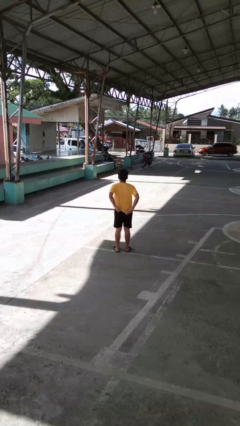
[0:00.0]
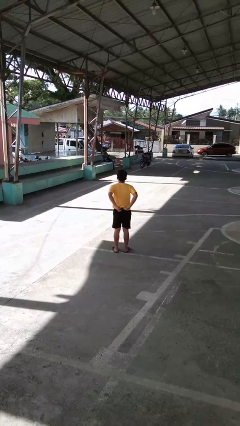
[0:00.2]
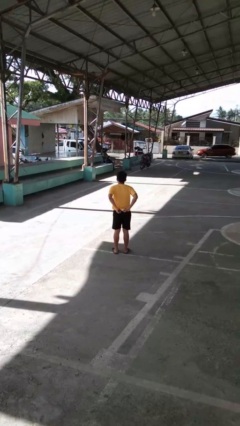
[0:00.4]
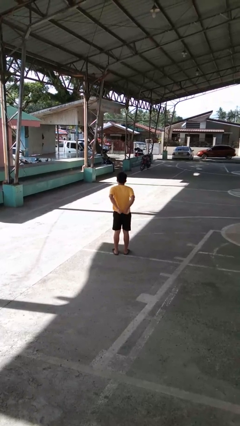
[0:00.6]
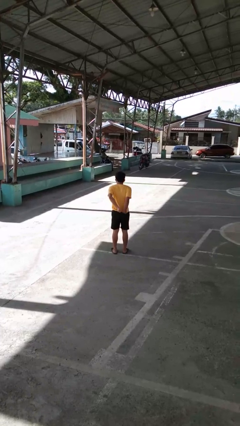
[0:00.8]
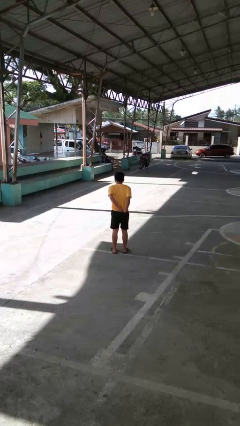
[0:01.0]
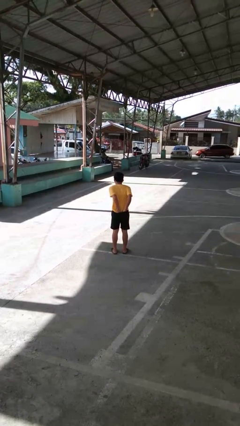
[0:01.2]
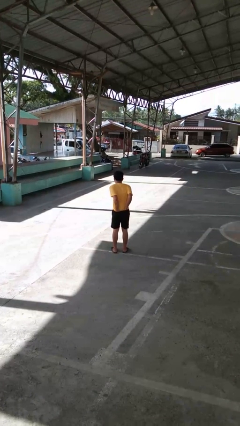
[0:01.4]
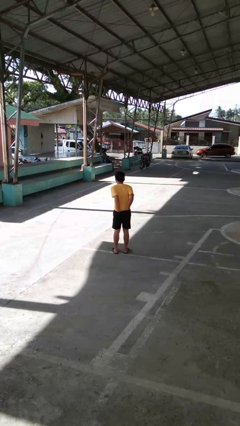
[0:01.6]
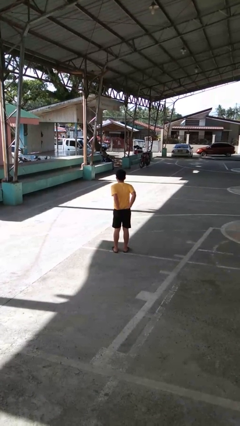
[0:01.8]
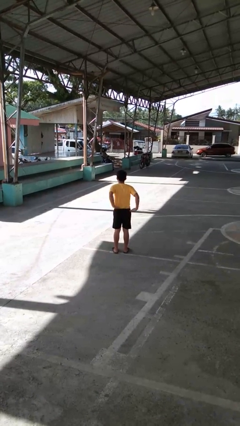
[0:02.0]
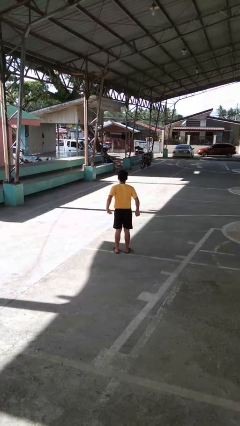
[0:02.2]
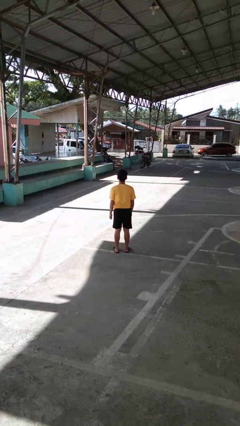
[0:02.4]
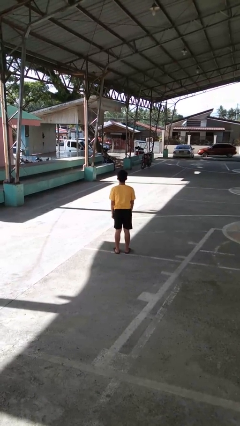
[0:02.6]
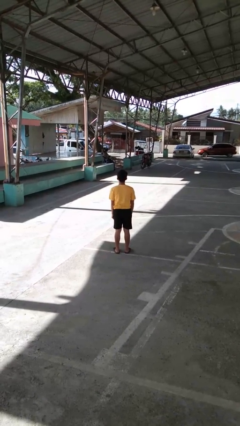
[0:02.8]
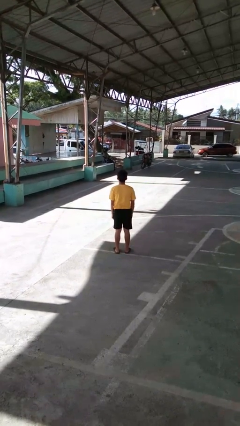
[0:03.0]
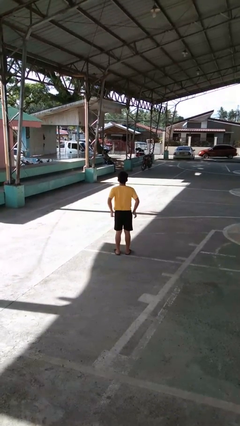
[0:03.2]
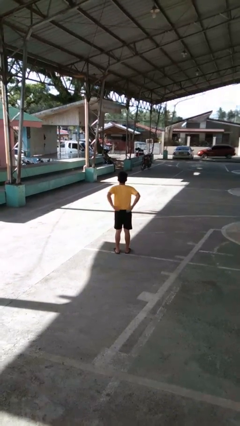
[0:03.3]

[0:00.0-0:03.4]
person tucks in shirt

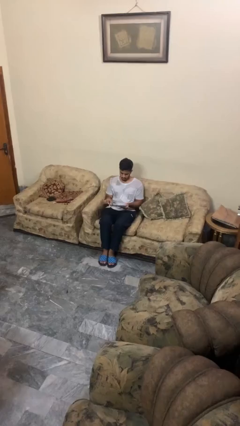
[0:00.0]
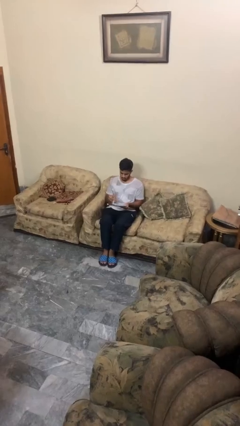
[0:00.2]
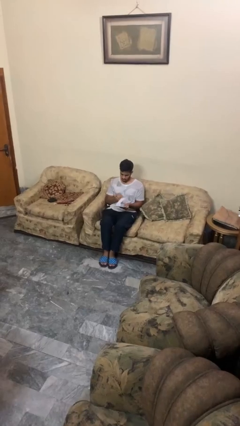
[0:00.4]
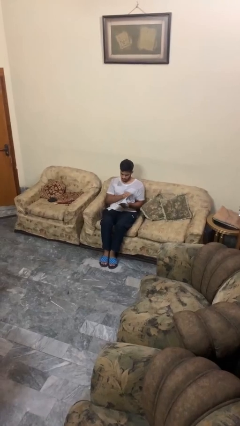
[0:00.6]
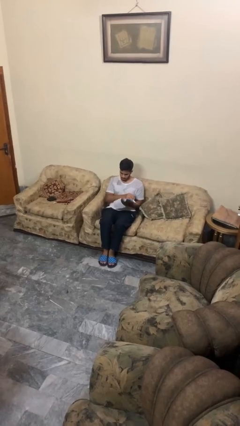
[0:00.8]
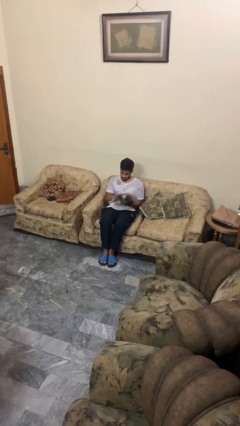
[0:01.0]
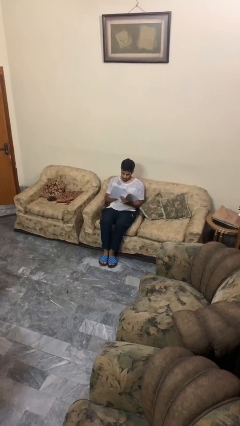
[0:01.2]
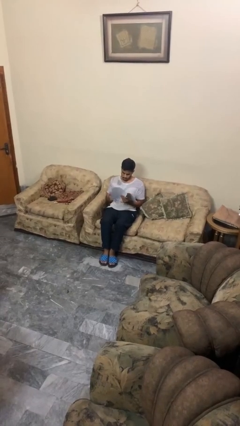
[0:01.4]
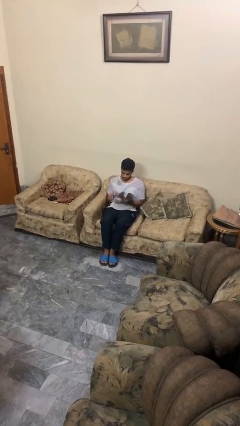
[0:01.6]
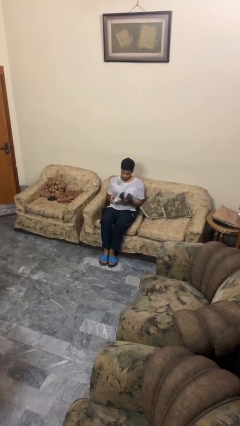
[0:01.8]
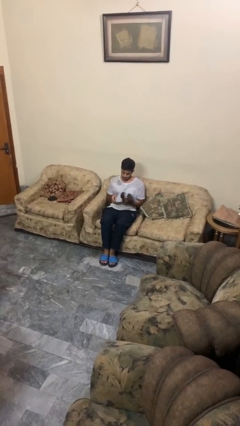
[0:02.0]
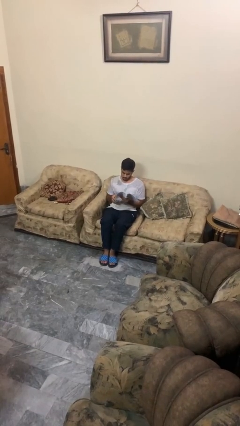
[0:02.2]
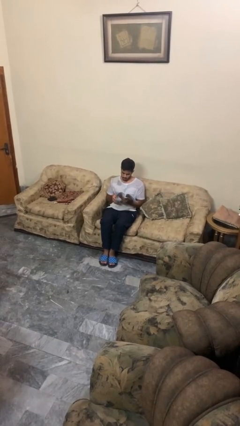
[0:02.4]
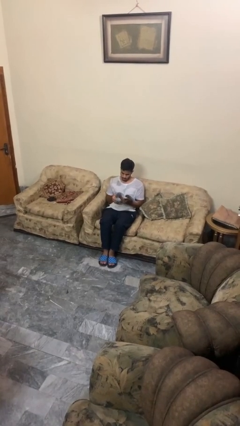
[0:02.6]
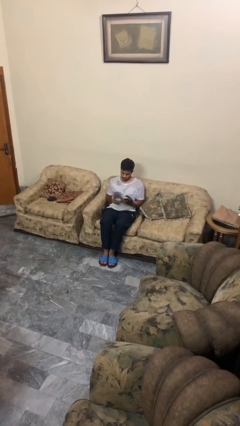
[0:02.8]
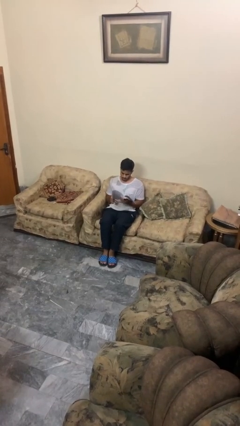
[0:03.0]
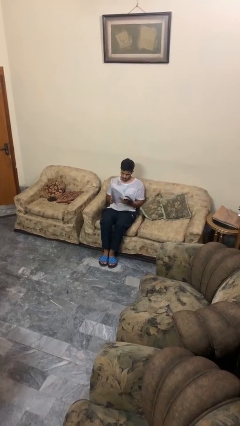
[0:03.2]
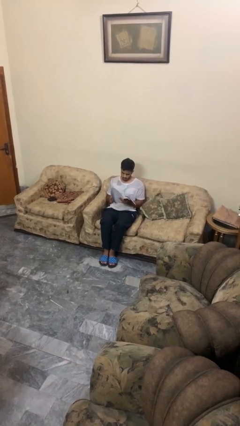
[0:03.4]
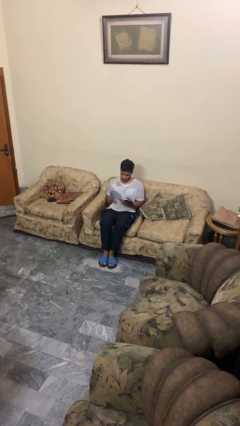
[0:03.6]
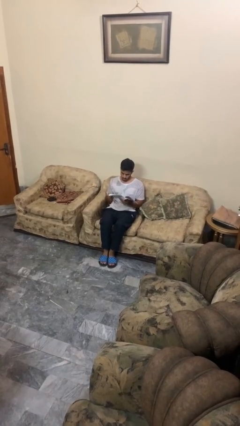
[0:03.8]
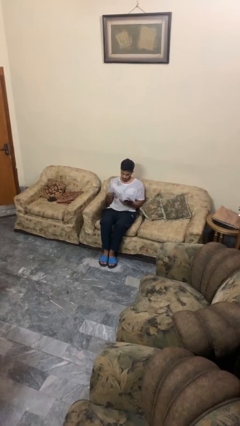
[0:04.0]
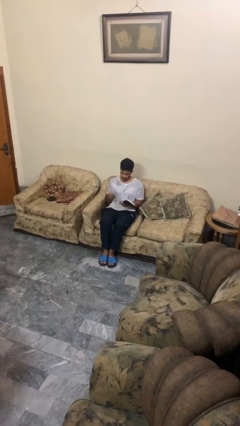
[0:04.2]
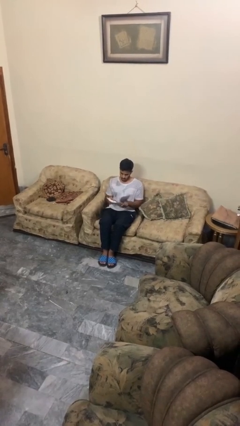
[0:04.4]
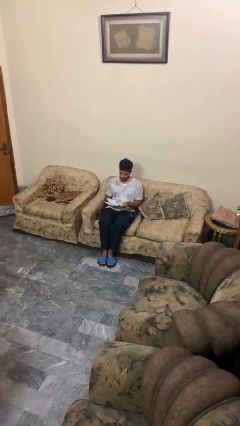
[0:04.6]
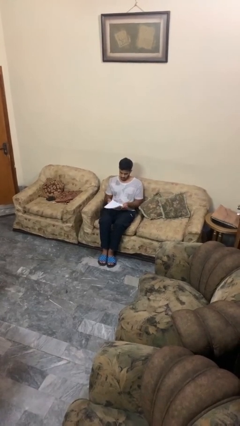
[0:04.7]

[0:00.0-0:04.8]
person reads magazine

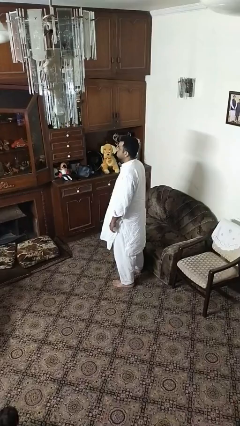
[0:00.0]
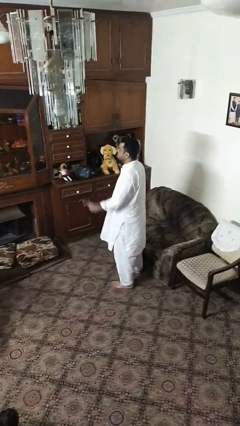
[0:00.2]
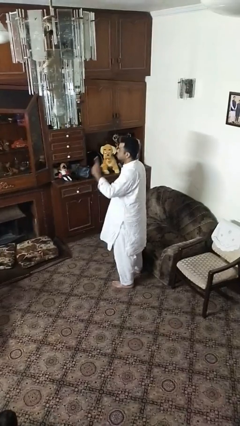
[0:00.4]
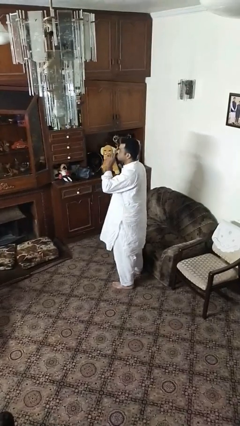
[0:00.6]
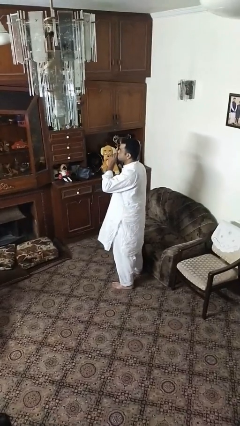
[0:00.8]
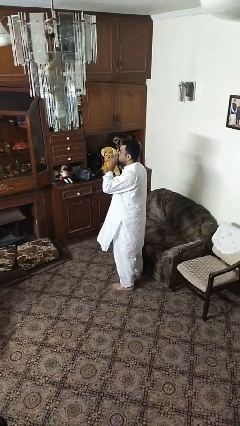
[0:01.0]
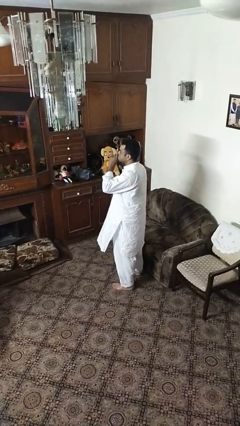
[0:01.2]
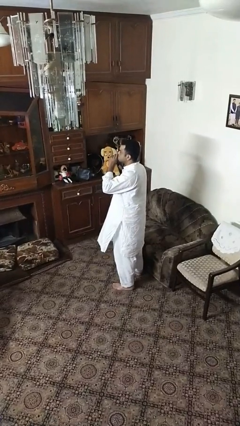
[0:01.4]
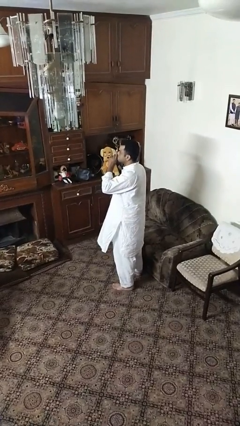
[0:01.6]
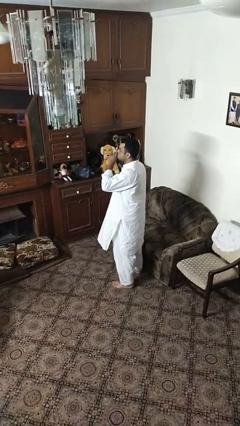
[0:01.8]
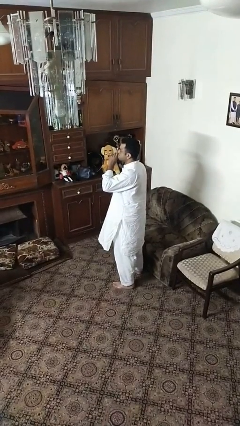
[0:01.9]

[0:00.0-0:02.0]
person gestures be quiet

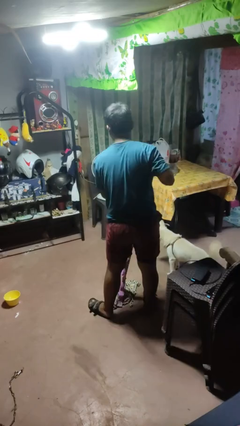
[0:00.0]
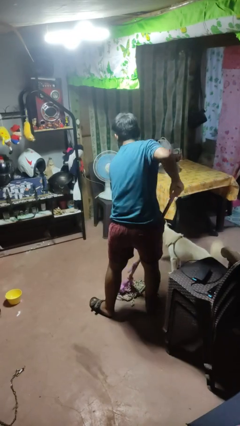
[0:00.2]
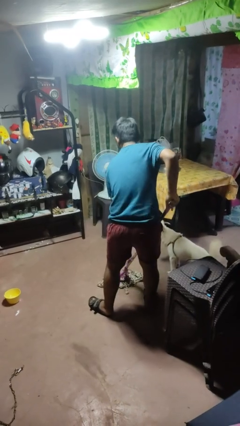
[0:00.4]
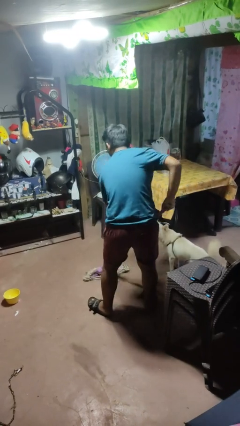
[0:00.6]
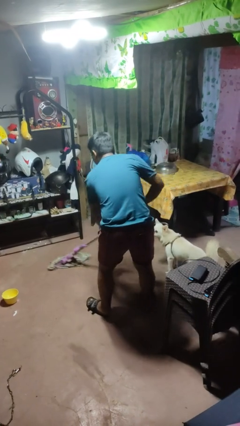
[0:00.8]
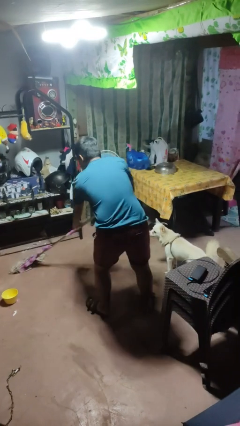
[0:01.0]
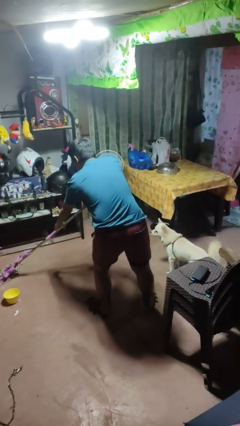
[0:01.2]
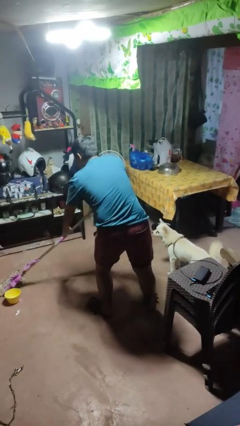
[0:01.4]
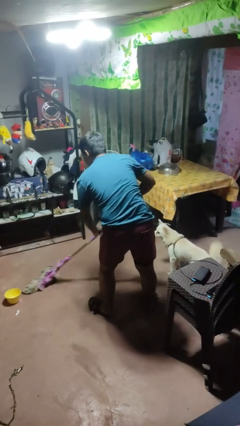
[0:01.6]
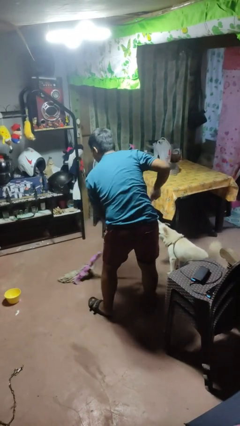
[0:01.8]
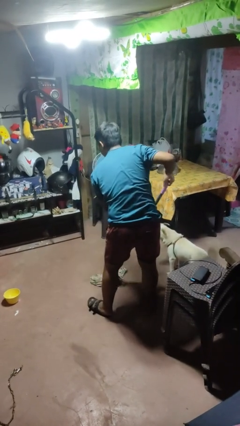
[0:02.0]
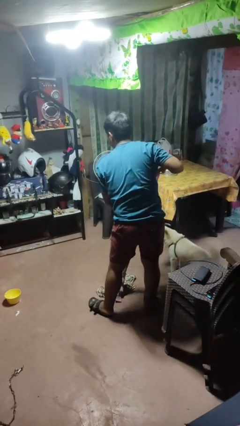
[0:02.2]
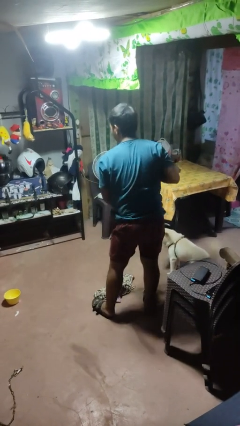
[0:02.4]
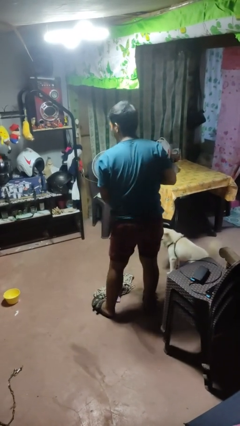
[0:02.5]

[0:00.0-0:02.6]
person mops

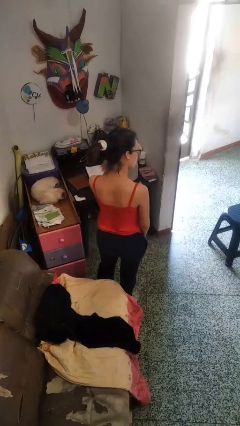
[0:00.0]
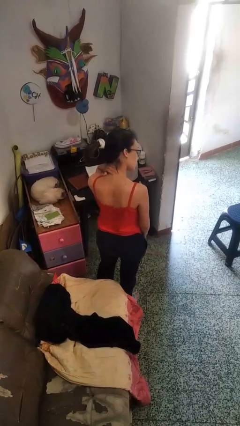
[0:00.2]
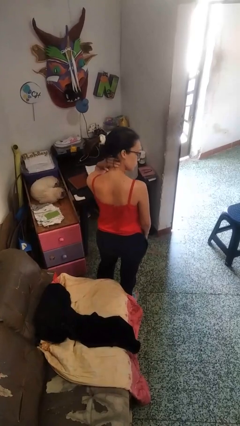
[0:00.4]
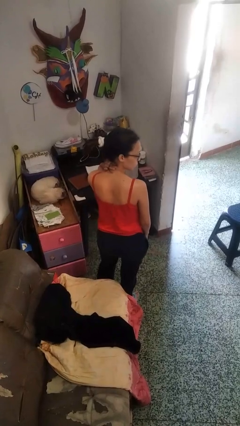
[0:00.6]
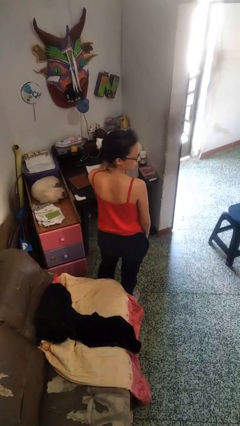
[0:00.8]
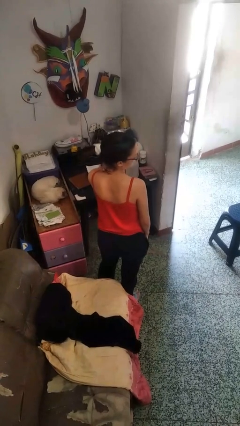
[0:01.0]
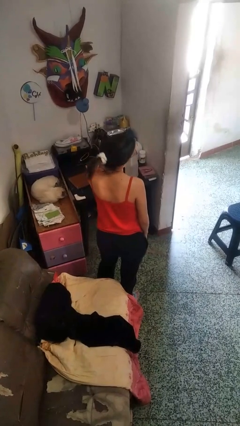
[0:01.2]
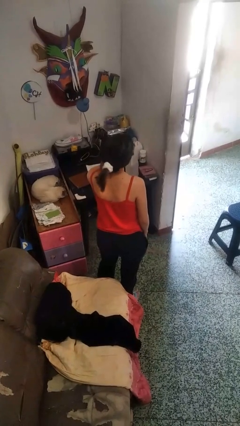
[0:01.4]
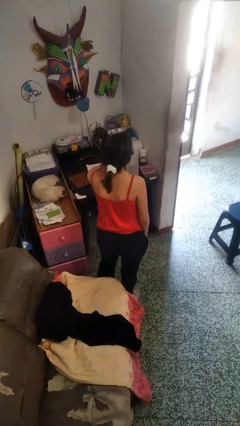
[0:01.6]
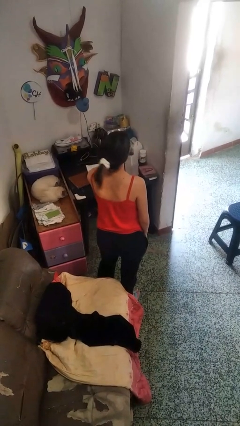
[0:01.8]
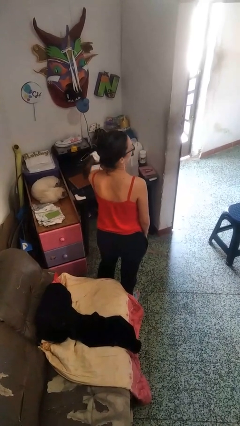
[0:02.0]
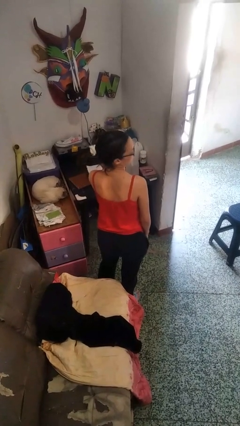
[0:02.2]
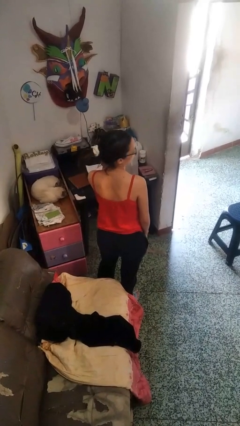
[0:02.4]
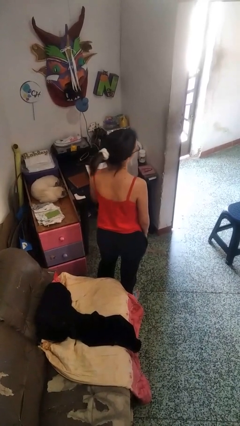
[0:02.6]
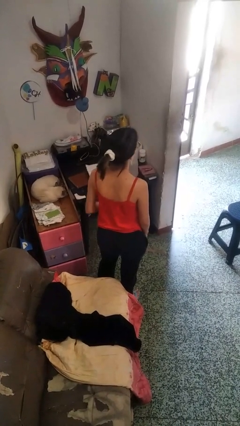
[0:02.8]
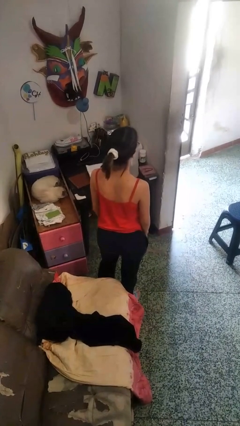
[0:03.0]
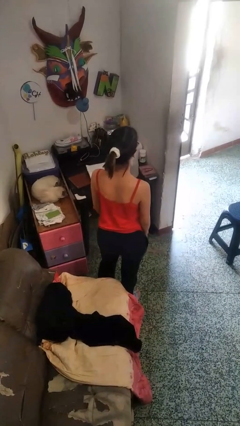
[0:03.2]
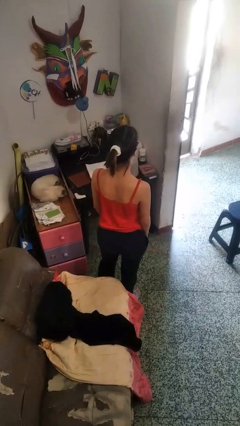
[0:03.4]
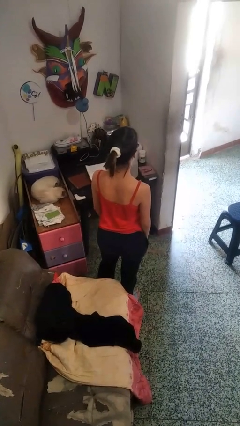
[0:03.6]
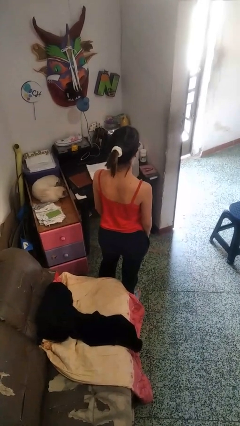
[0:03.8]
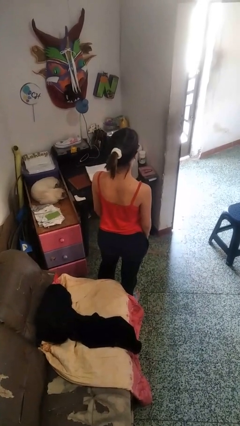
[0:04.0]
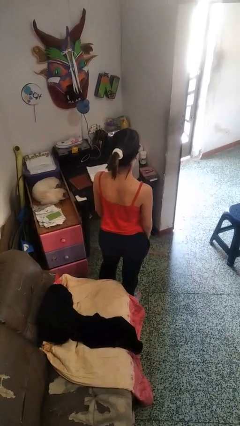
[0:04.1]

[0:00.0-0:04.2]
person rubs neck

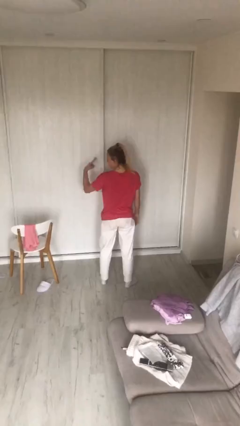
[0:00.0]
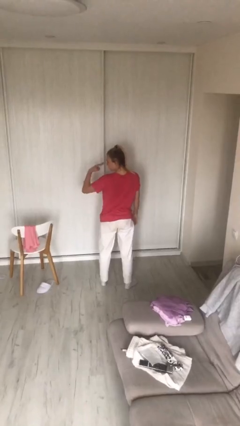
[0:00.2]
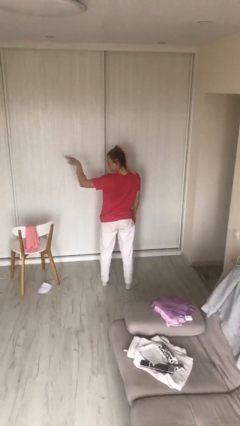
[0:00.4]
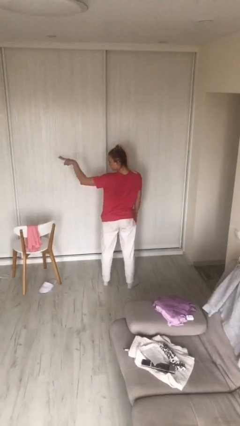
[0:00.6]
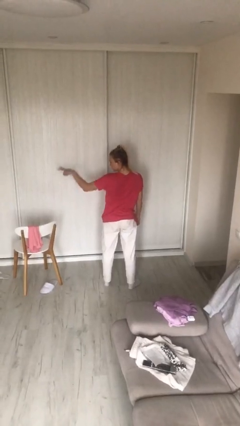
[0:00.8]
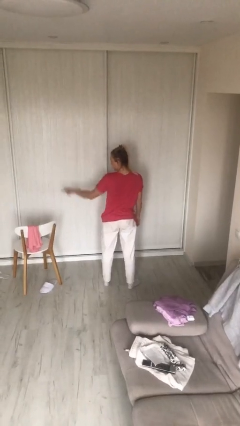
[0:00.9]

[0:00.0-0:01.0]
person gestures watch closely
